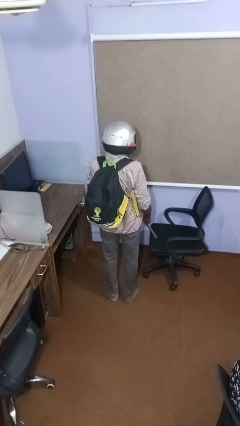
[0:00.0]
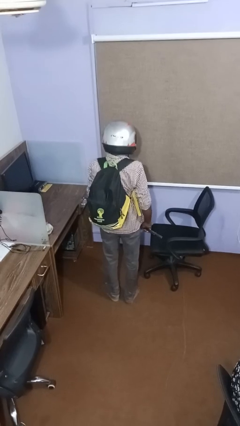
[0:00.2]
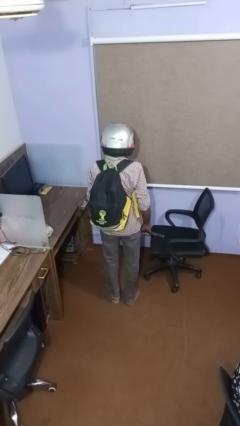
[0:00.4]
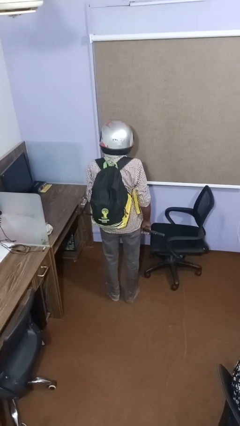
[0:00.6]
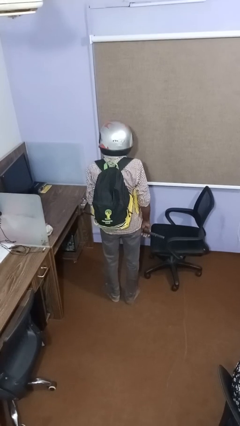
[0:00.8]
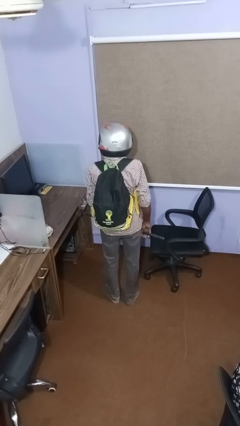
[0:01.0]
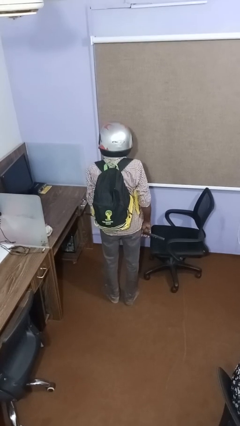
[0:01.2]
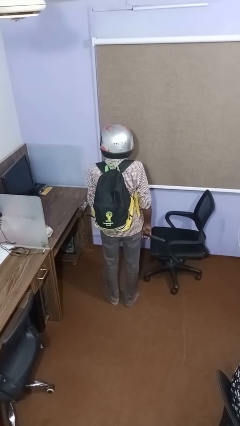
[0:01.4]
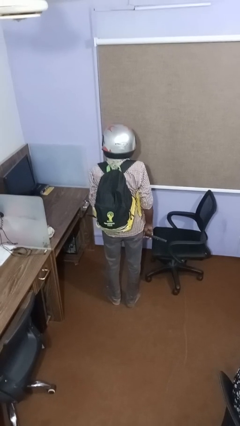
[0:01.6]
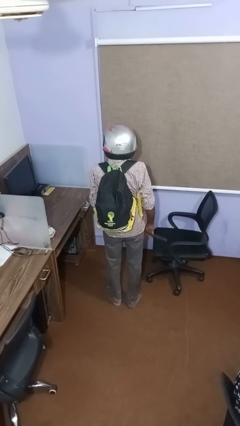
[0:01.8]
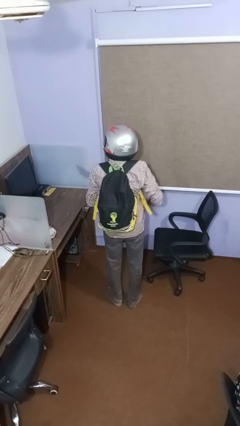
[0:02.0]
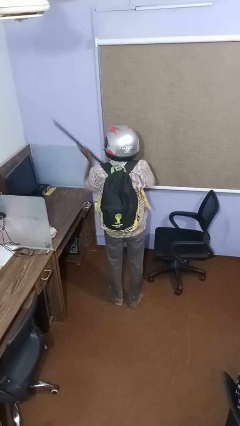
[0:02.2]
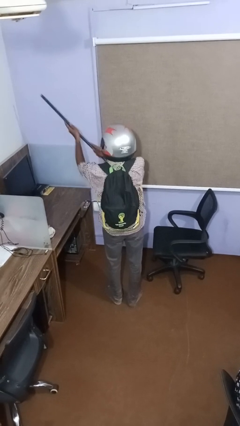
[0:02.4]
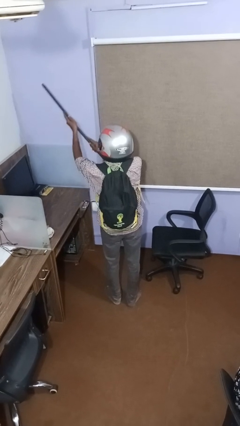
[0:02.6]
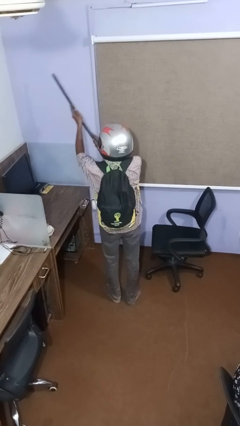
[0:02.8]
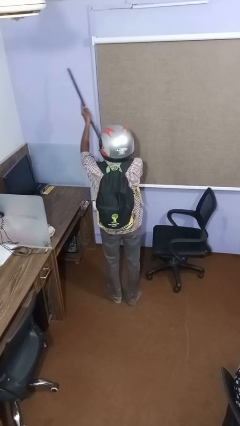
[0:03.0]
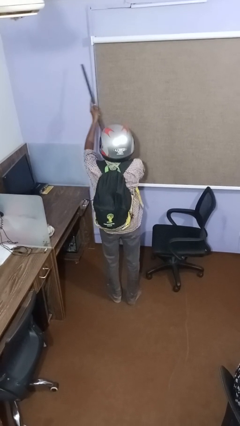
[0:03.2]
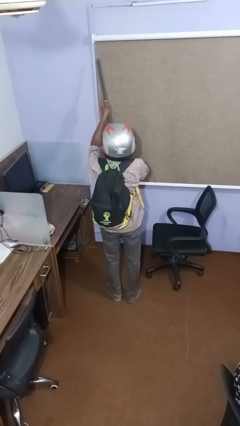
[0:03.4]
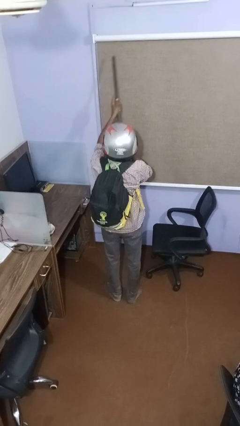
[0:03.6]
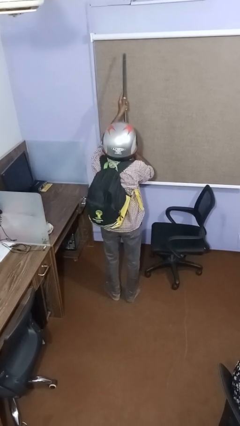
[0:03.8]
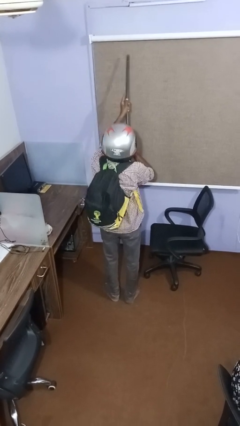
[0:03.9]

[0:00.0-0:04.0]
person swats bug

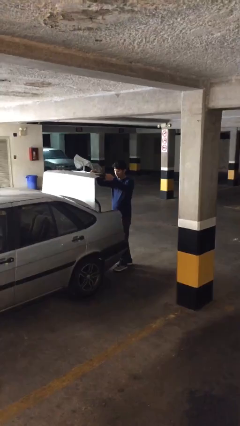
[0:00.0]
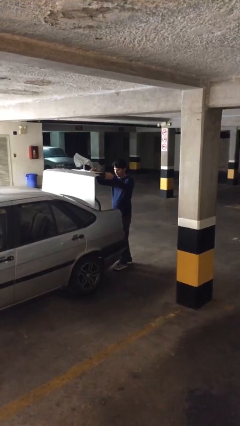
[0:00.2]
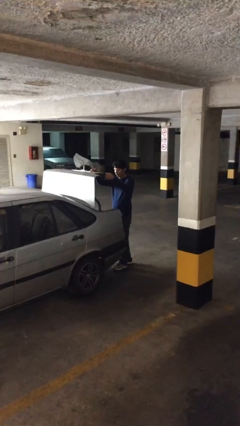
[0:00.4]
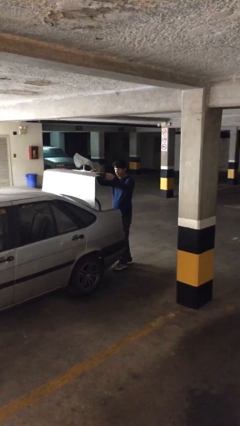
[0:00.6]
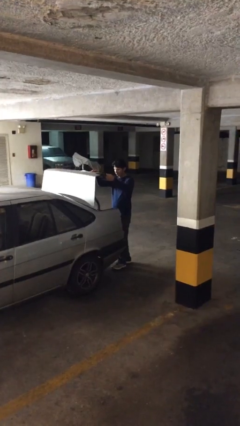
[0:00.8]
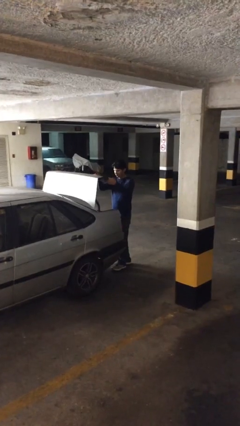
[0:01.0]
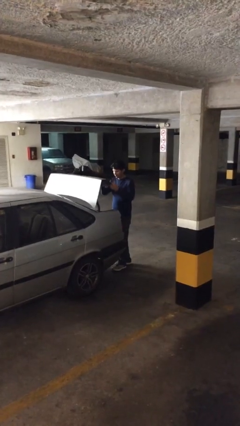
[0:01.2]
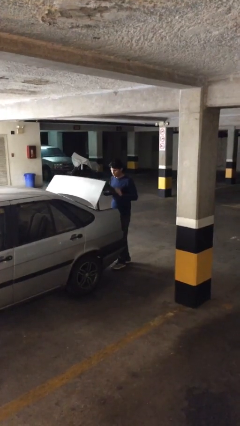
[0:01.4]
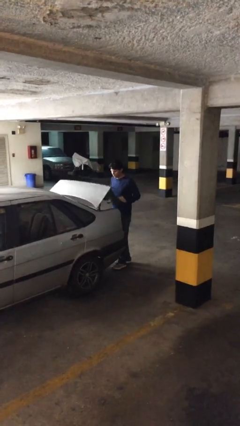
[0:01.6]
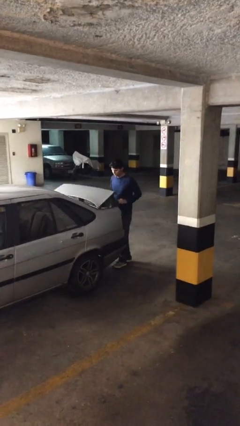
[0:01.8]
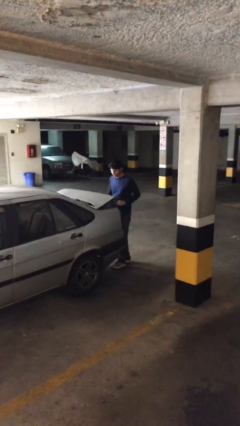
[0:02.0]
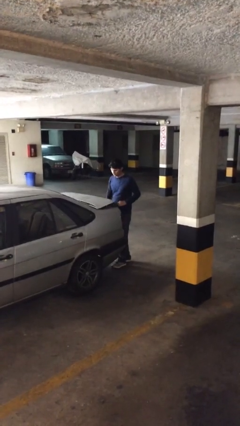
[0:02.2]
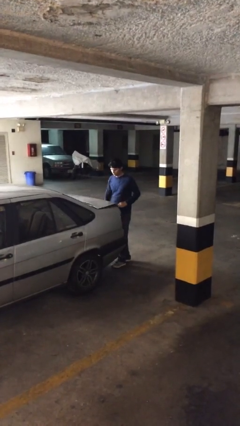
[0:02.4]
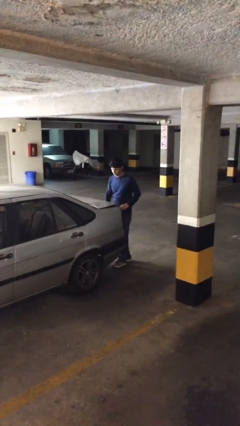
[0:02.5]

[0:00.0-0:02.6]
person closes car trunk

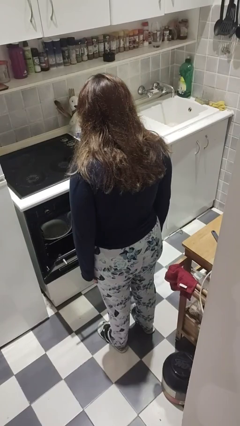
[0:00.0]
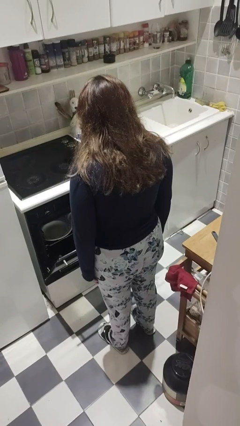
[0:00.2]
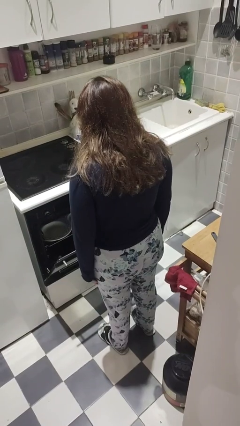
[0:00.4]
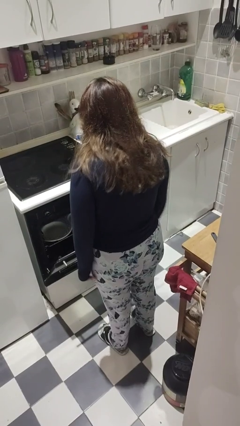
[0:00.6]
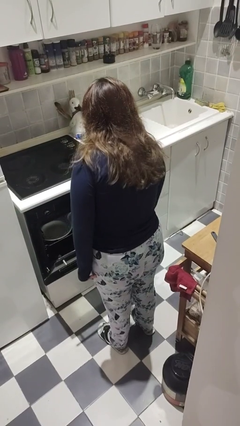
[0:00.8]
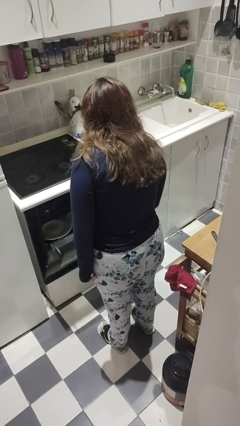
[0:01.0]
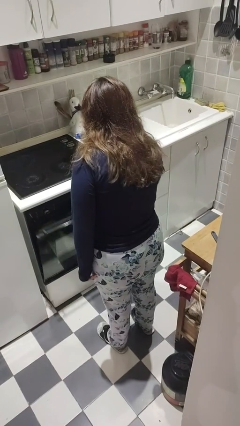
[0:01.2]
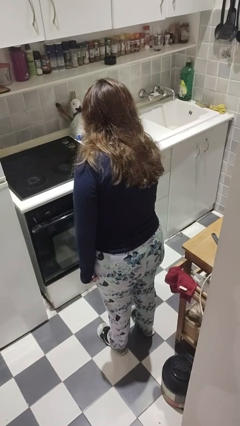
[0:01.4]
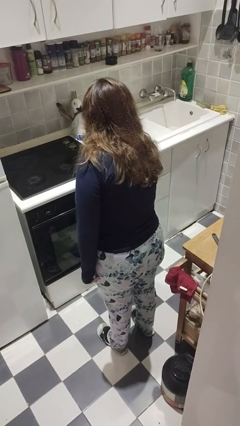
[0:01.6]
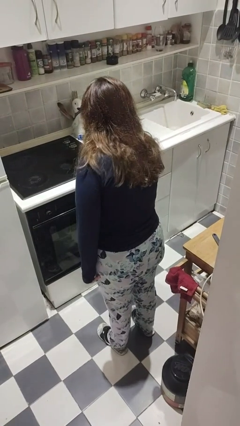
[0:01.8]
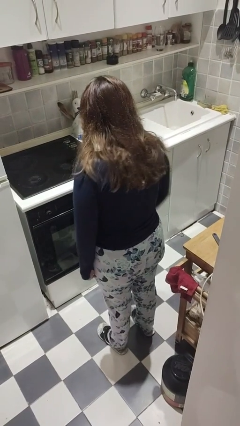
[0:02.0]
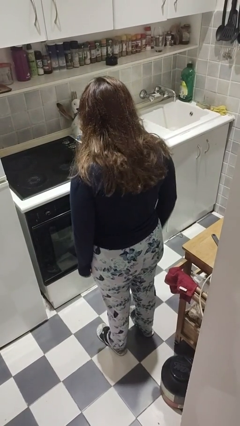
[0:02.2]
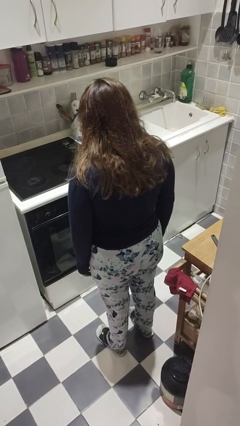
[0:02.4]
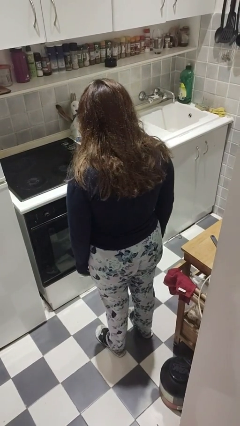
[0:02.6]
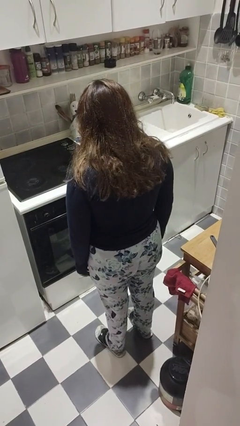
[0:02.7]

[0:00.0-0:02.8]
person closes dishwasher

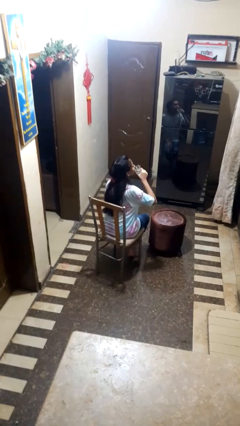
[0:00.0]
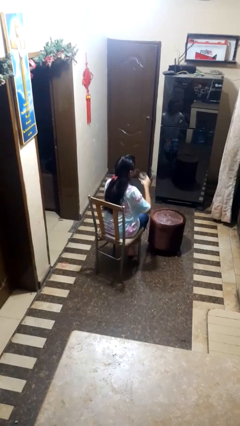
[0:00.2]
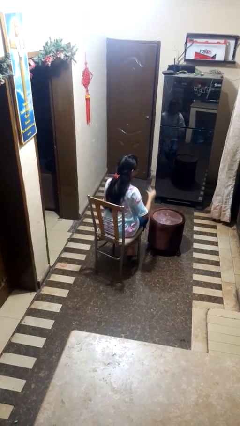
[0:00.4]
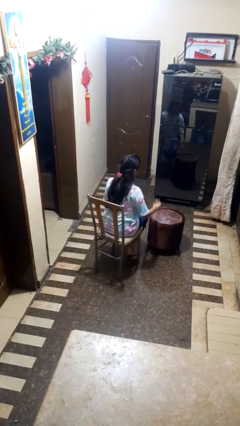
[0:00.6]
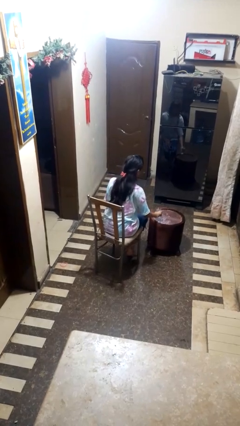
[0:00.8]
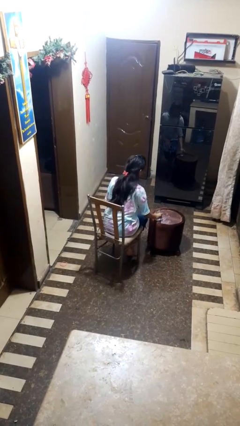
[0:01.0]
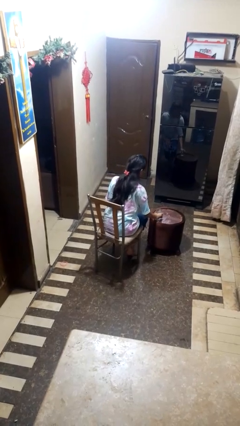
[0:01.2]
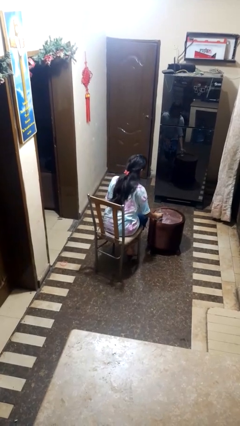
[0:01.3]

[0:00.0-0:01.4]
person puts down object on table

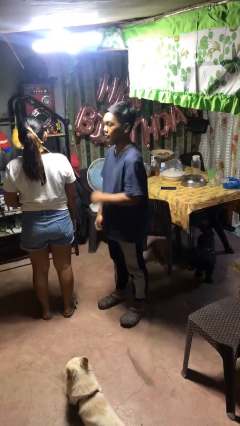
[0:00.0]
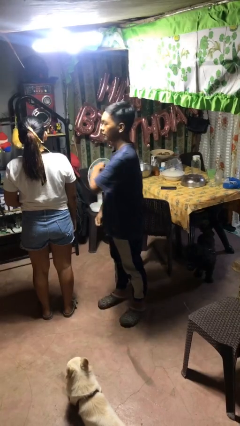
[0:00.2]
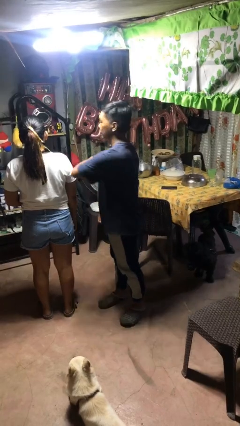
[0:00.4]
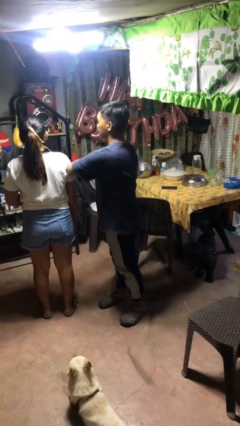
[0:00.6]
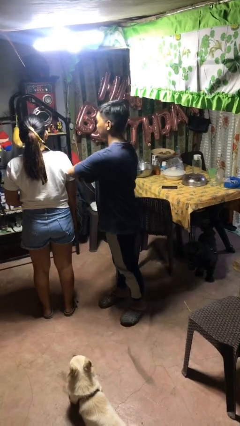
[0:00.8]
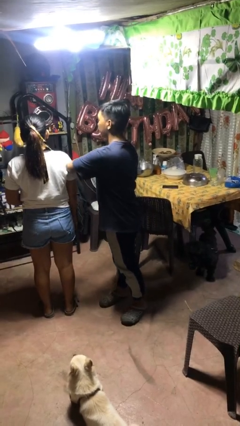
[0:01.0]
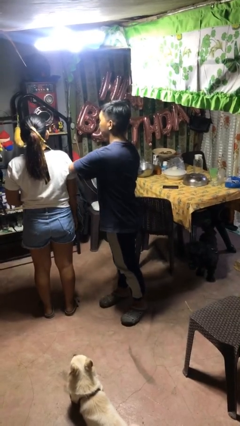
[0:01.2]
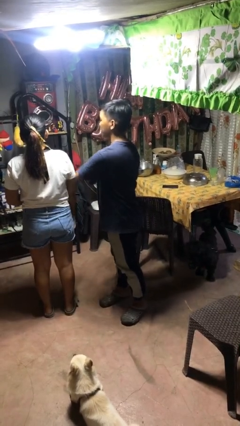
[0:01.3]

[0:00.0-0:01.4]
person nudges person with elbow

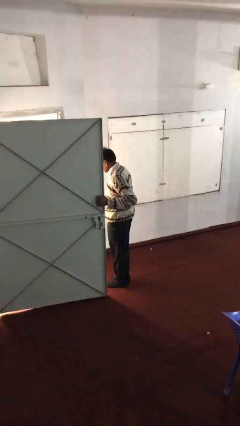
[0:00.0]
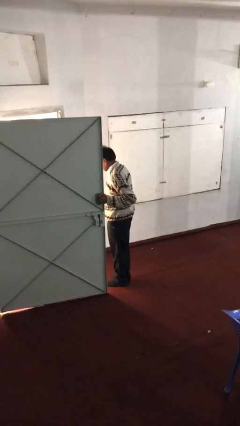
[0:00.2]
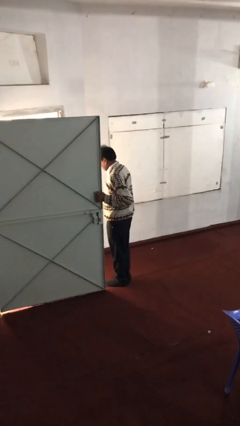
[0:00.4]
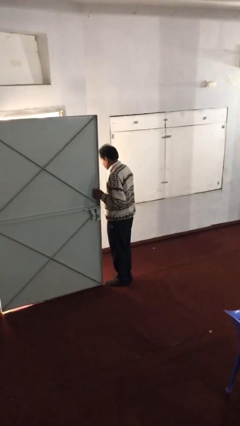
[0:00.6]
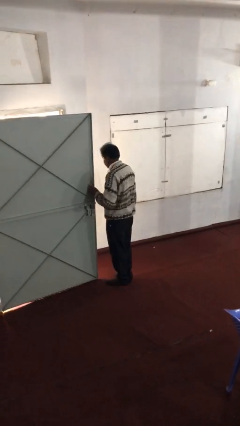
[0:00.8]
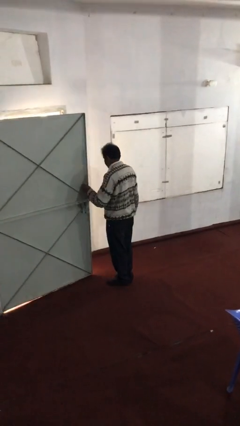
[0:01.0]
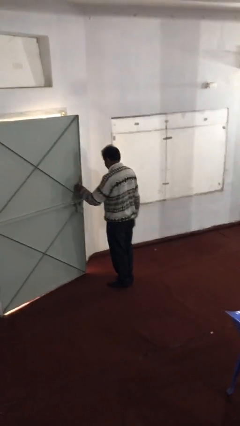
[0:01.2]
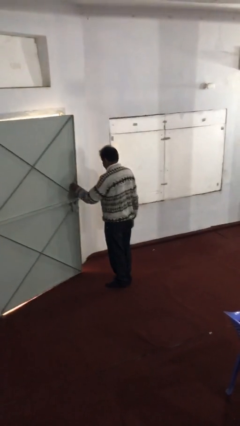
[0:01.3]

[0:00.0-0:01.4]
person closes facility door

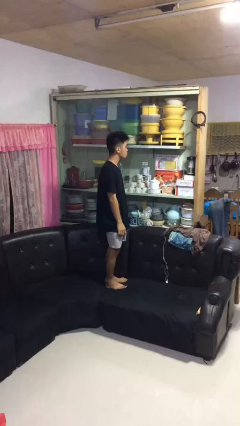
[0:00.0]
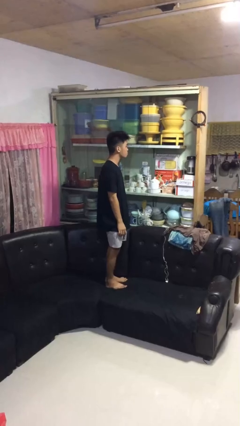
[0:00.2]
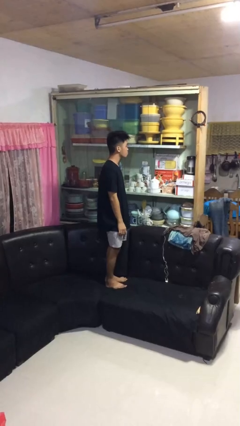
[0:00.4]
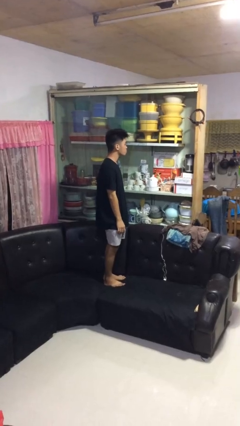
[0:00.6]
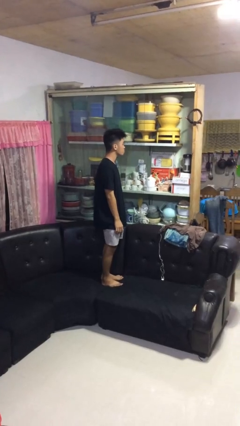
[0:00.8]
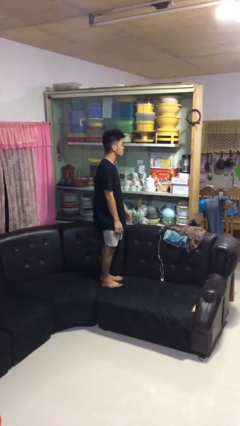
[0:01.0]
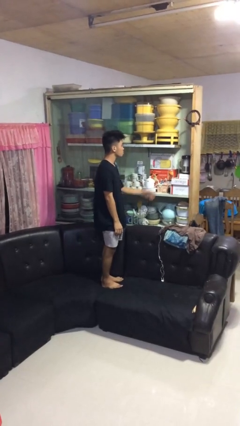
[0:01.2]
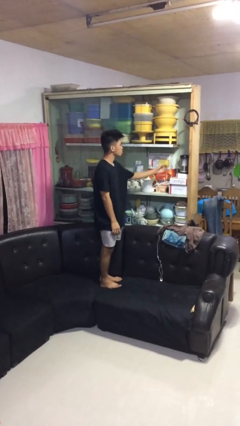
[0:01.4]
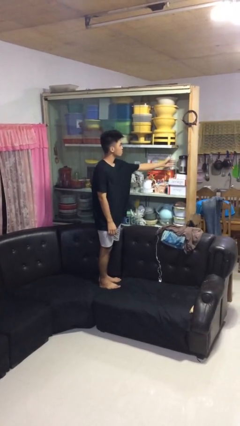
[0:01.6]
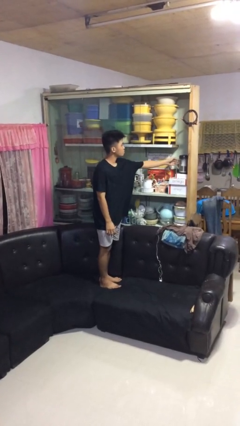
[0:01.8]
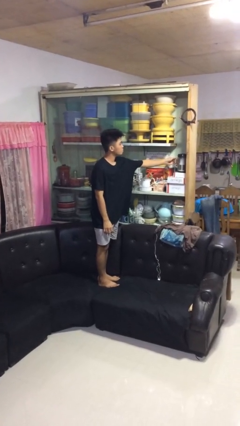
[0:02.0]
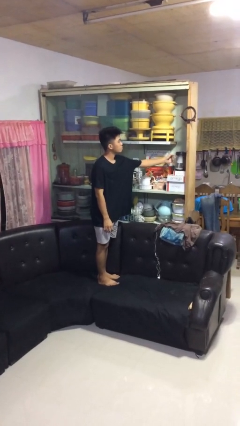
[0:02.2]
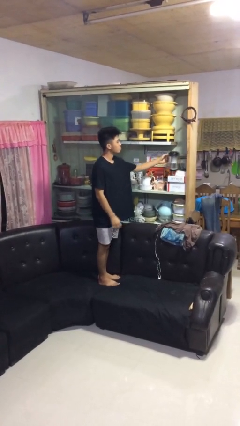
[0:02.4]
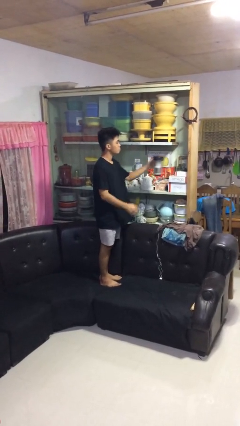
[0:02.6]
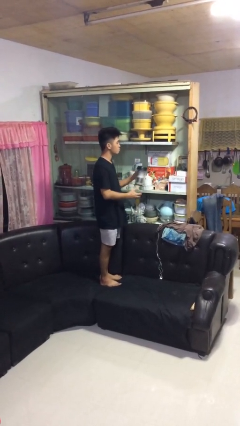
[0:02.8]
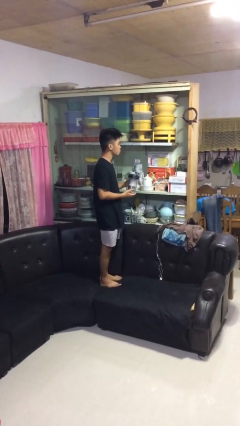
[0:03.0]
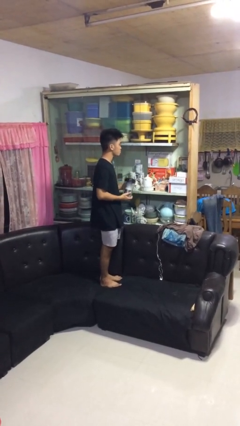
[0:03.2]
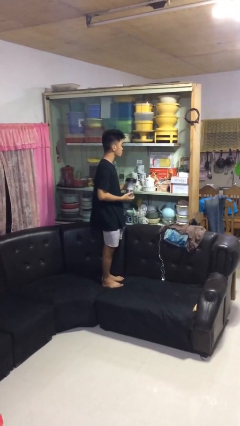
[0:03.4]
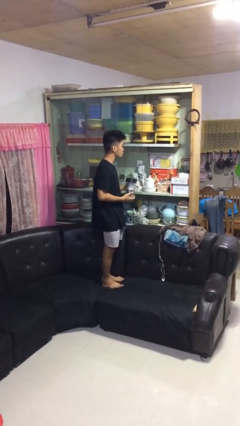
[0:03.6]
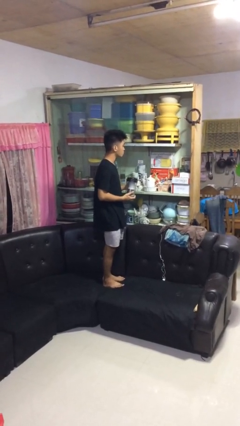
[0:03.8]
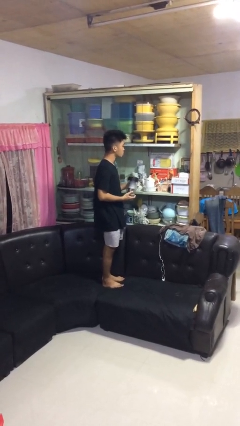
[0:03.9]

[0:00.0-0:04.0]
person picks up object from cabinet
